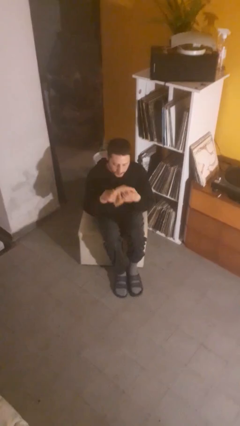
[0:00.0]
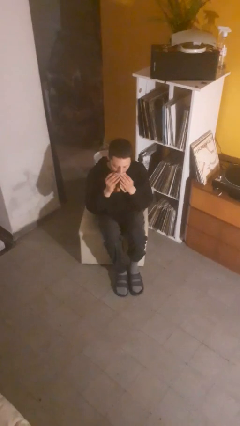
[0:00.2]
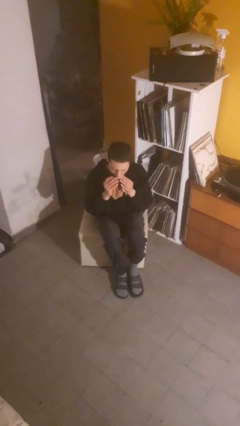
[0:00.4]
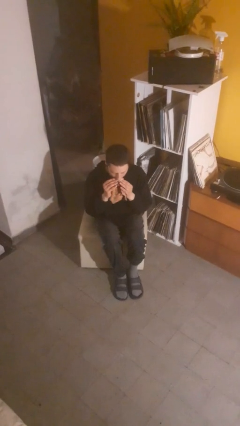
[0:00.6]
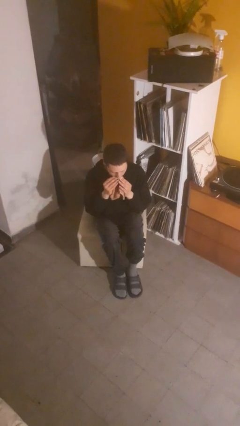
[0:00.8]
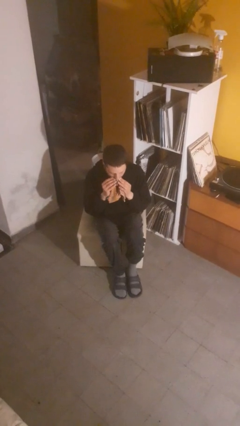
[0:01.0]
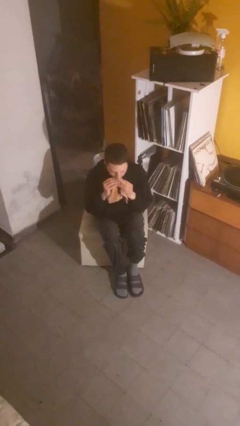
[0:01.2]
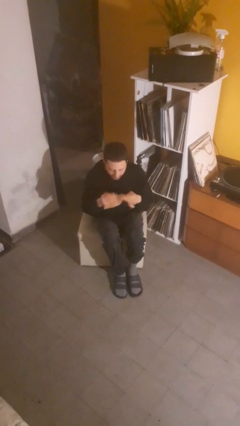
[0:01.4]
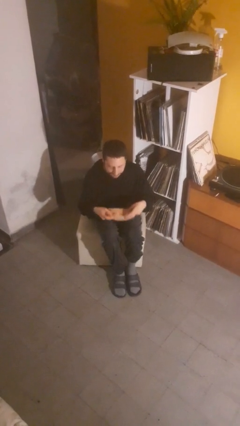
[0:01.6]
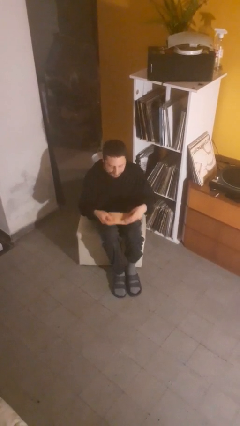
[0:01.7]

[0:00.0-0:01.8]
person wipes mouth with napkin

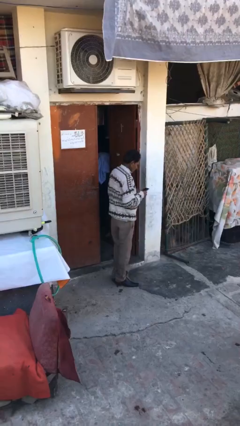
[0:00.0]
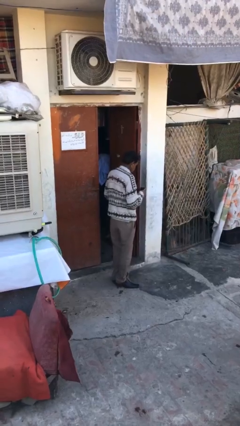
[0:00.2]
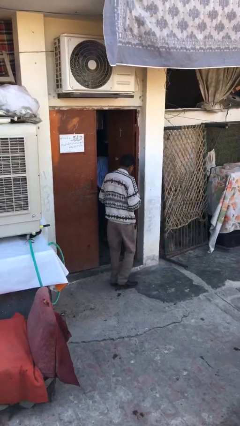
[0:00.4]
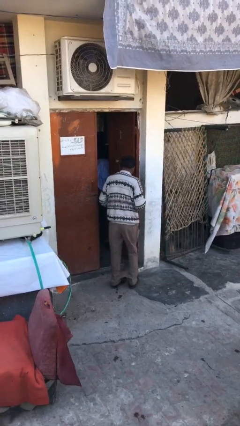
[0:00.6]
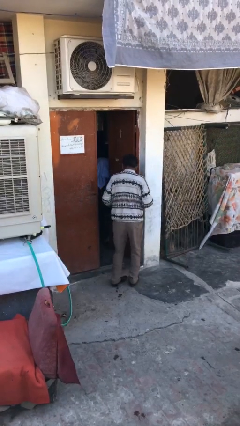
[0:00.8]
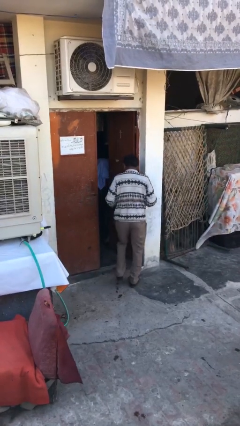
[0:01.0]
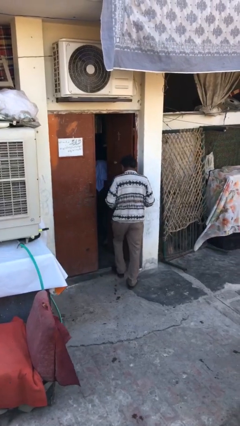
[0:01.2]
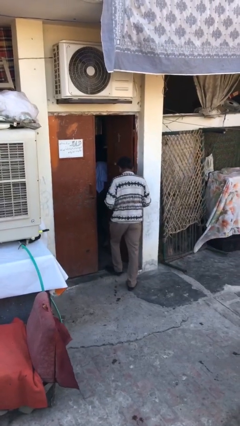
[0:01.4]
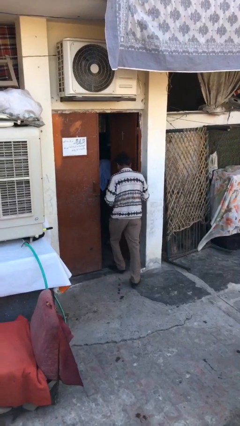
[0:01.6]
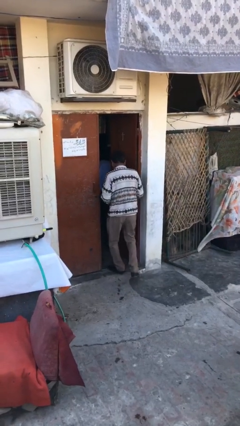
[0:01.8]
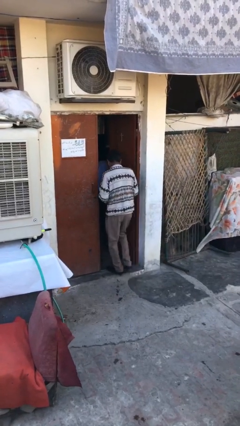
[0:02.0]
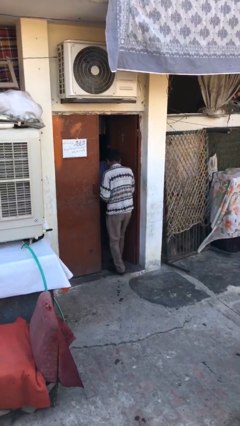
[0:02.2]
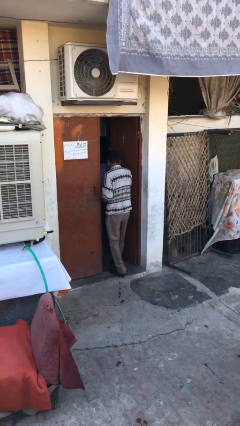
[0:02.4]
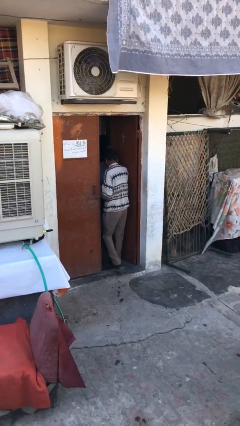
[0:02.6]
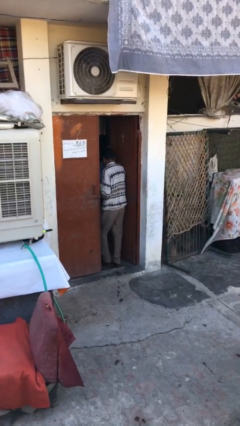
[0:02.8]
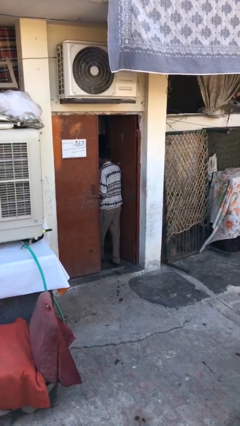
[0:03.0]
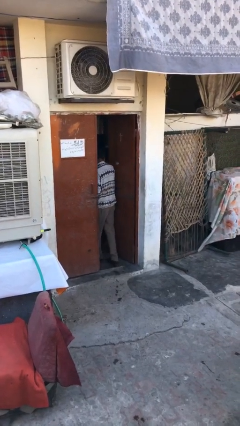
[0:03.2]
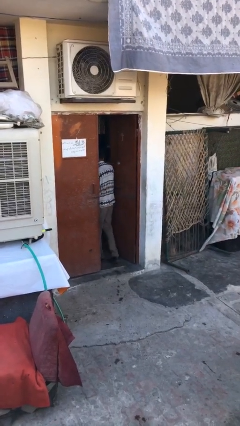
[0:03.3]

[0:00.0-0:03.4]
person exits scene through structure

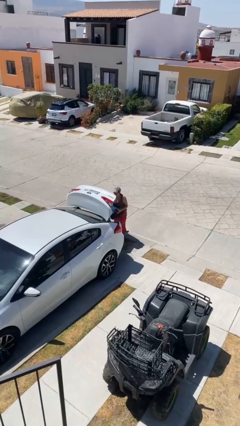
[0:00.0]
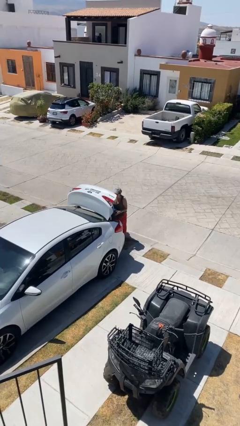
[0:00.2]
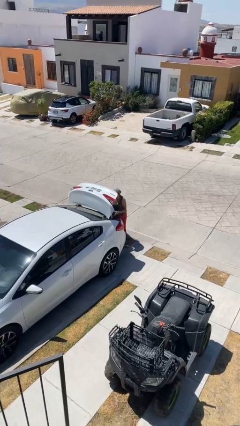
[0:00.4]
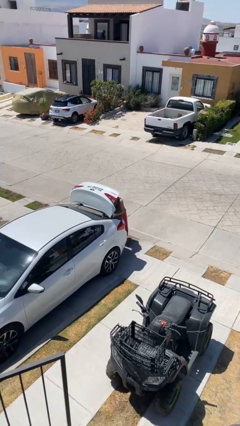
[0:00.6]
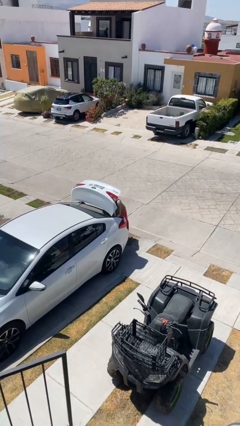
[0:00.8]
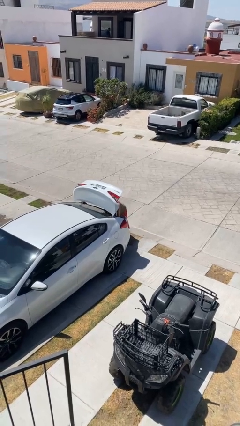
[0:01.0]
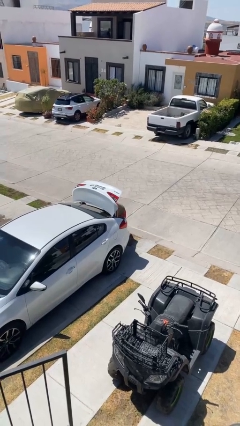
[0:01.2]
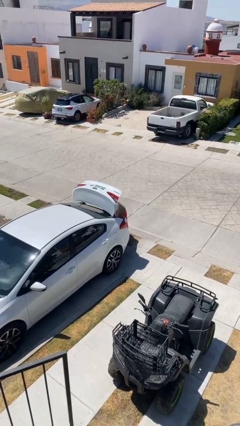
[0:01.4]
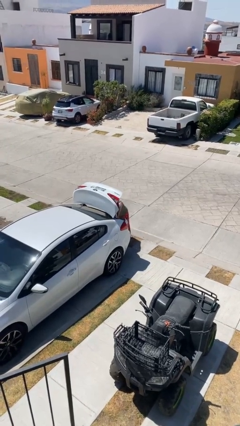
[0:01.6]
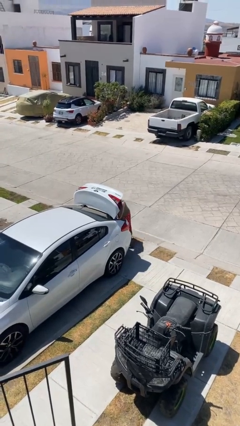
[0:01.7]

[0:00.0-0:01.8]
person loads car

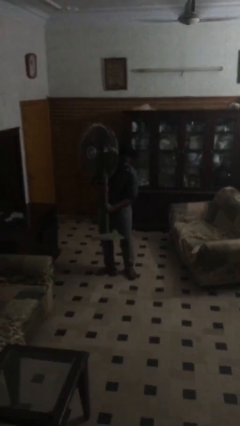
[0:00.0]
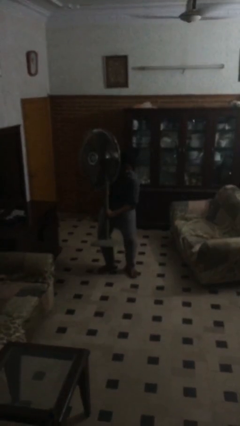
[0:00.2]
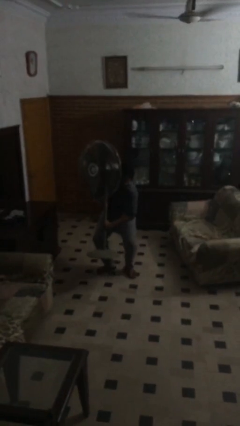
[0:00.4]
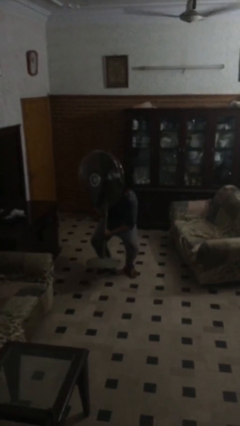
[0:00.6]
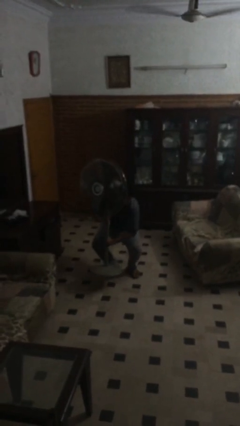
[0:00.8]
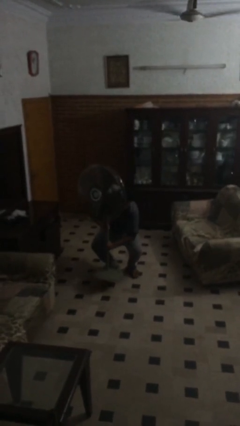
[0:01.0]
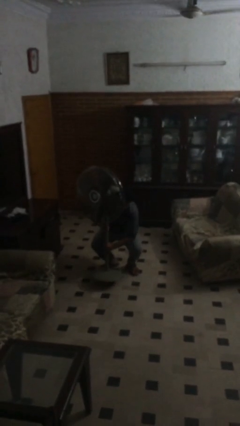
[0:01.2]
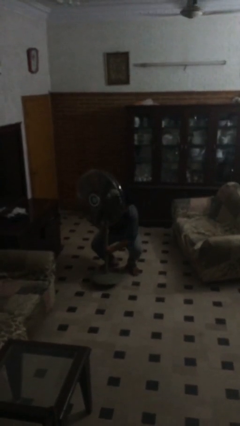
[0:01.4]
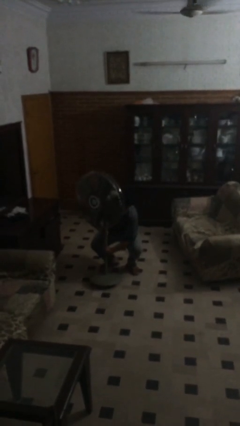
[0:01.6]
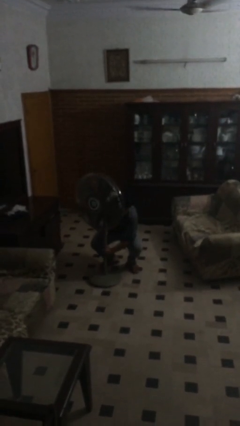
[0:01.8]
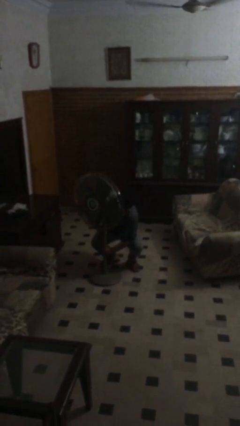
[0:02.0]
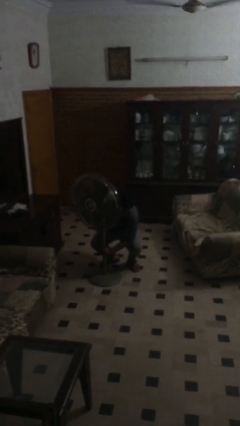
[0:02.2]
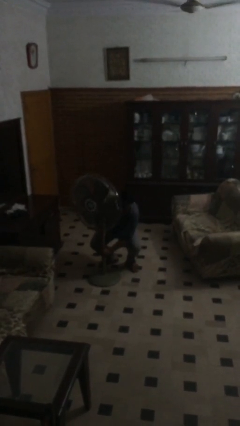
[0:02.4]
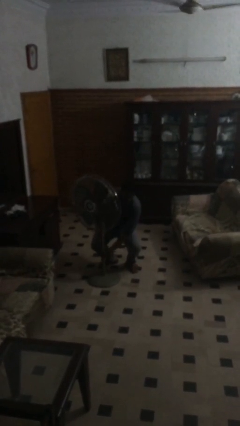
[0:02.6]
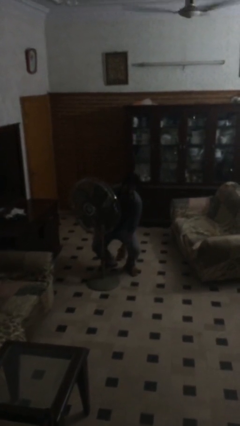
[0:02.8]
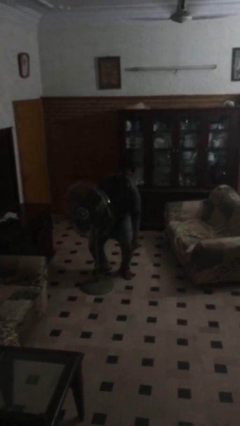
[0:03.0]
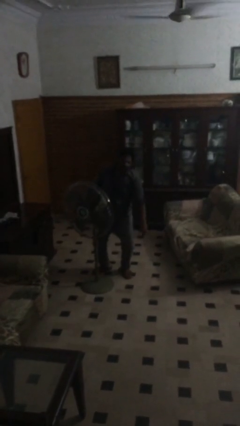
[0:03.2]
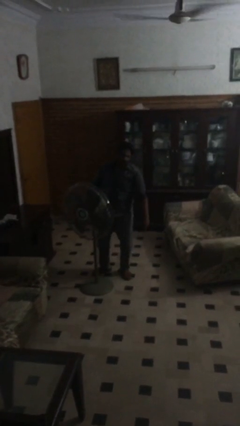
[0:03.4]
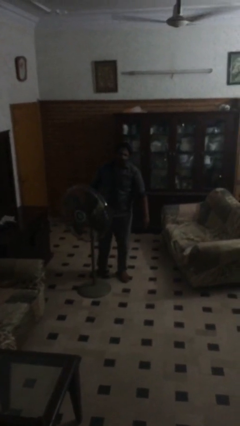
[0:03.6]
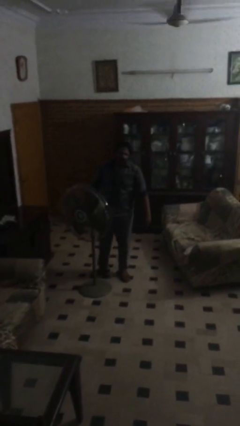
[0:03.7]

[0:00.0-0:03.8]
person puts down object on floor

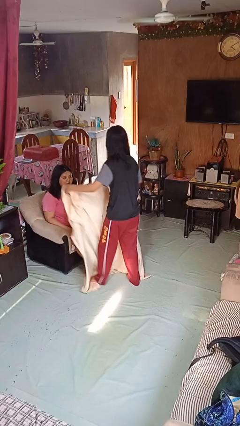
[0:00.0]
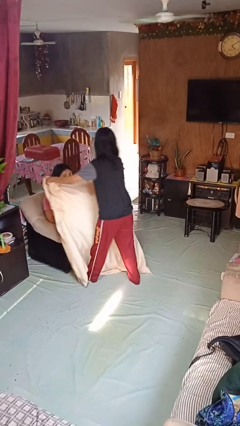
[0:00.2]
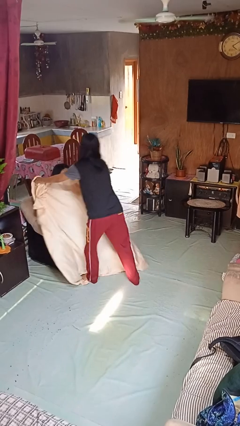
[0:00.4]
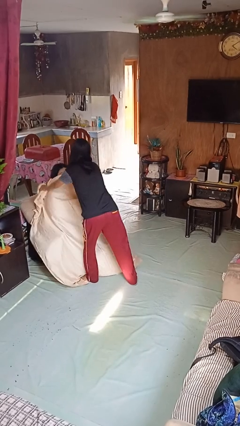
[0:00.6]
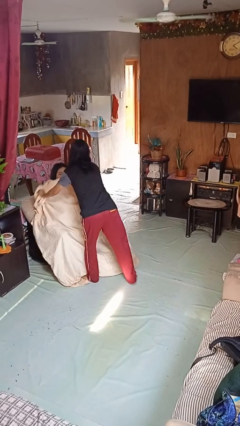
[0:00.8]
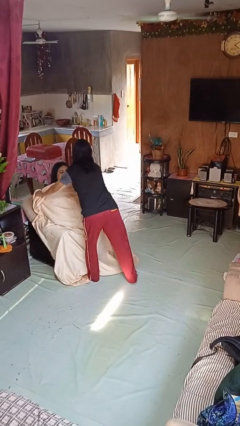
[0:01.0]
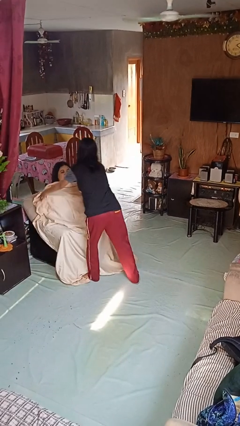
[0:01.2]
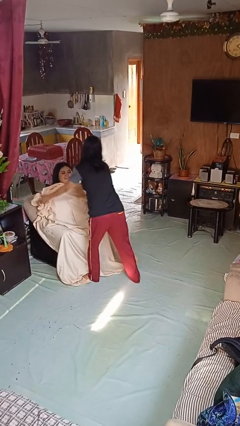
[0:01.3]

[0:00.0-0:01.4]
person covers friend with blanket

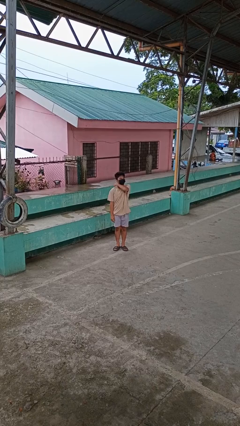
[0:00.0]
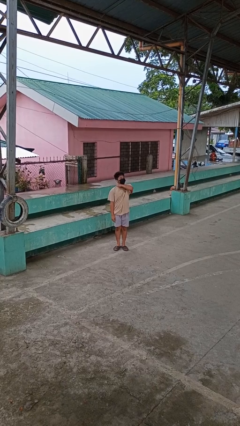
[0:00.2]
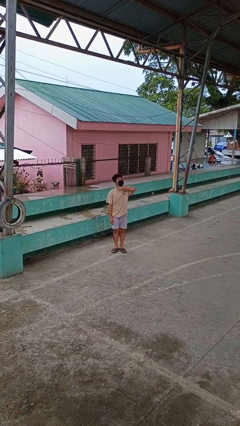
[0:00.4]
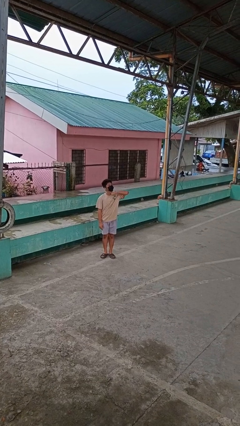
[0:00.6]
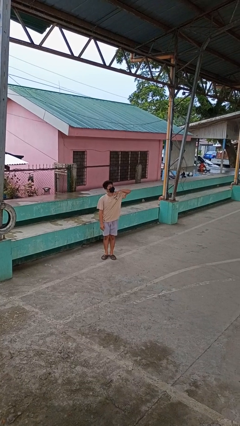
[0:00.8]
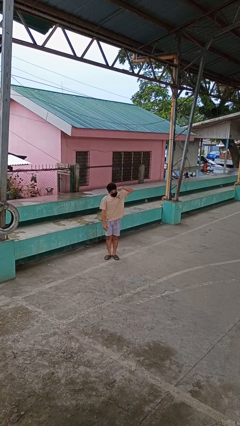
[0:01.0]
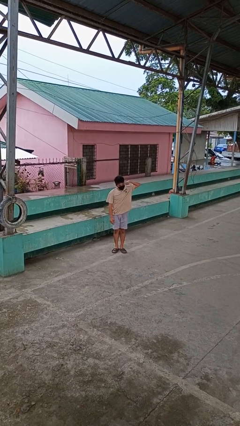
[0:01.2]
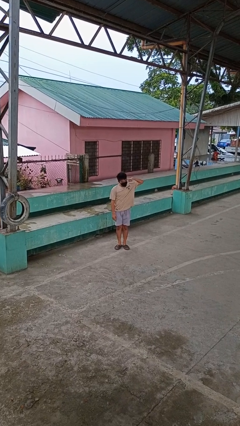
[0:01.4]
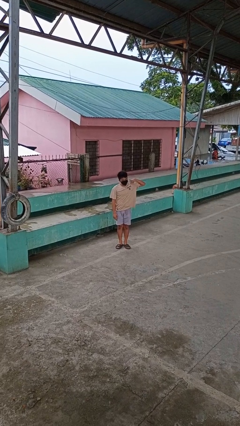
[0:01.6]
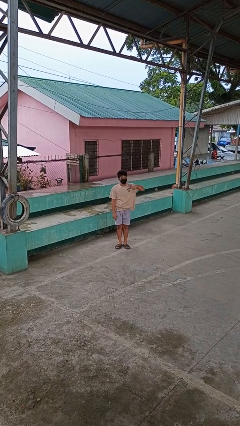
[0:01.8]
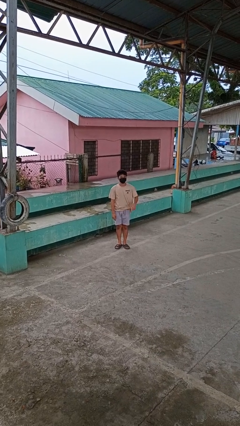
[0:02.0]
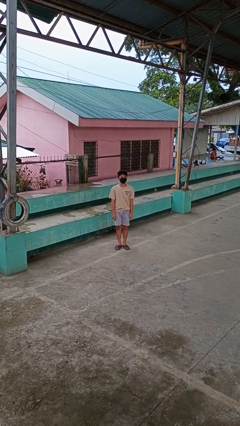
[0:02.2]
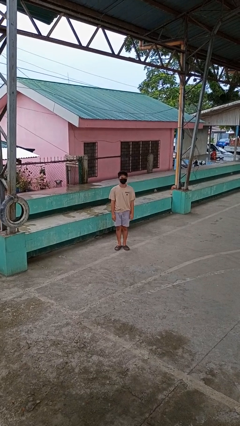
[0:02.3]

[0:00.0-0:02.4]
person gestures cut

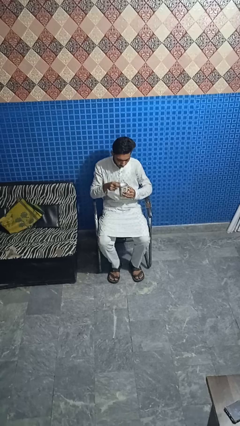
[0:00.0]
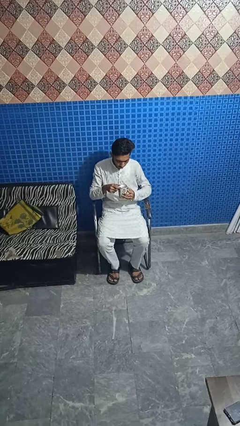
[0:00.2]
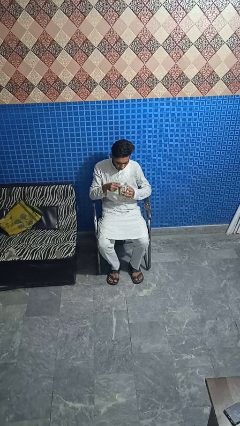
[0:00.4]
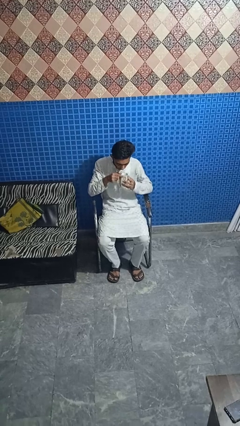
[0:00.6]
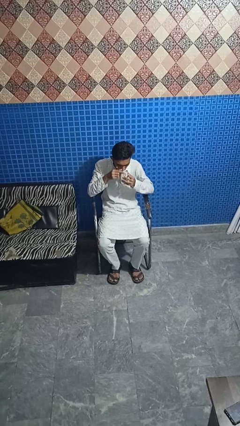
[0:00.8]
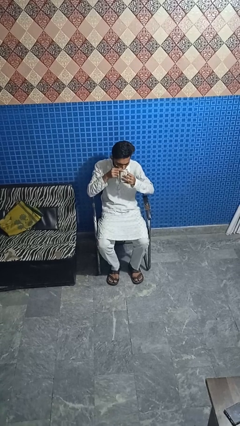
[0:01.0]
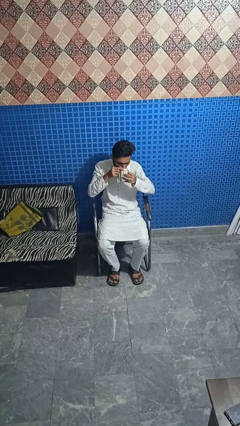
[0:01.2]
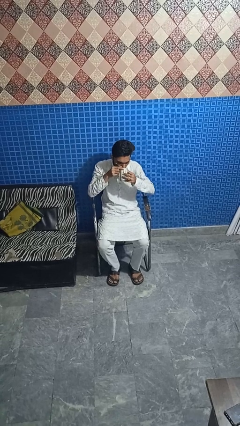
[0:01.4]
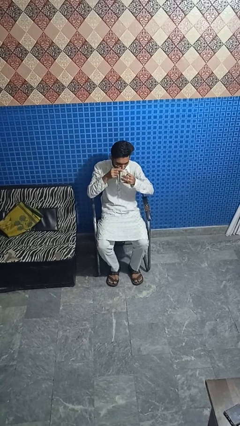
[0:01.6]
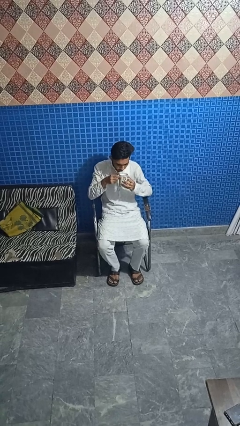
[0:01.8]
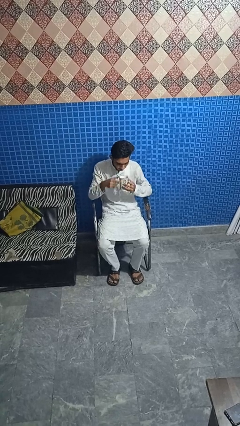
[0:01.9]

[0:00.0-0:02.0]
person drinks from mug

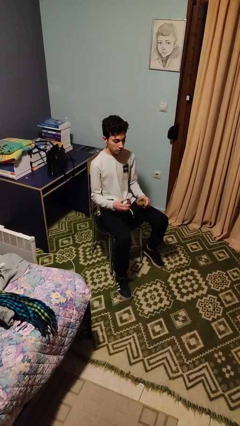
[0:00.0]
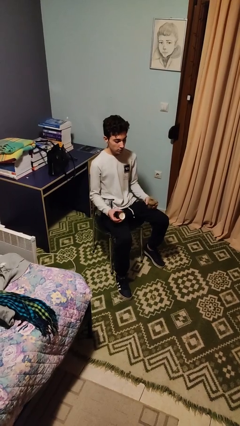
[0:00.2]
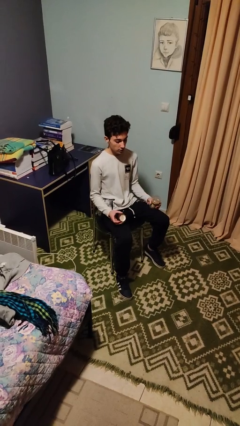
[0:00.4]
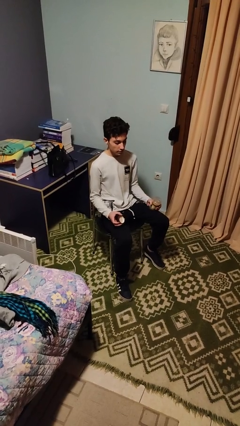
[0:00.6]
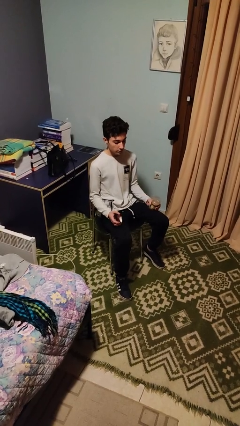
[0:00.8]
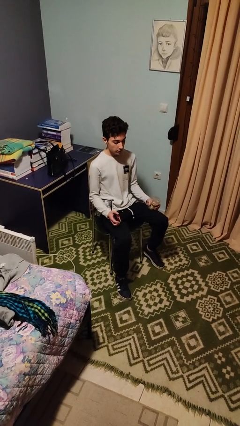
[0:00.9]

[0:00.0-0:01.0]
person opens jar
